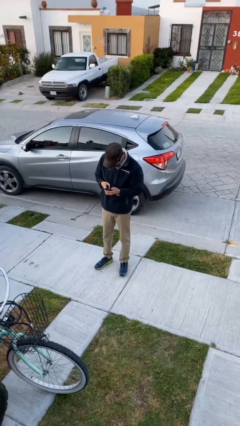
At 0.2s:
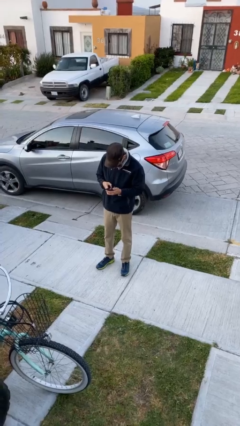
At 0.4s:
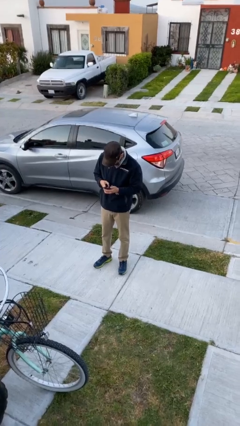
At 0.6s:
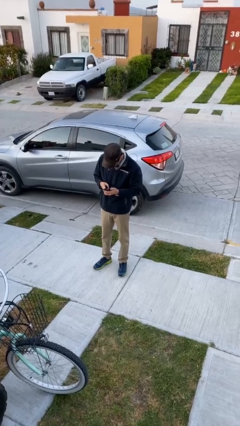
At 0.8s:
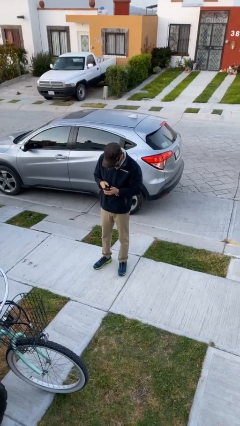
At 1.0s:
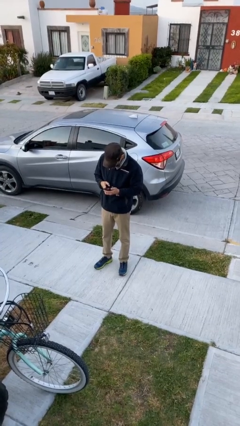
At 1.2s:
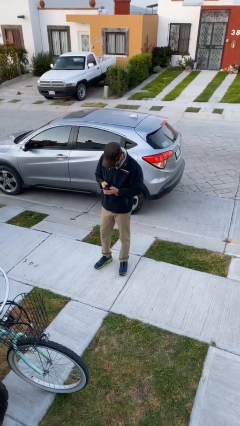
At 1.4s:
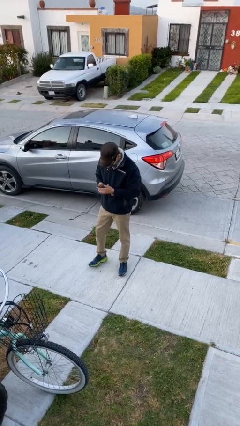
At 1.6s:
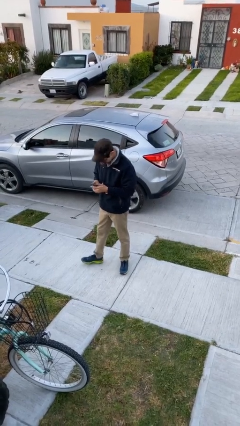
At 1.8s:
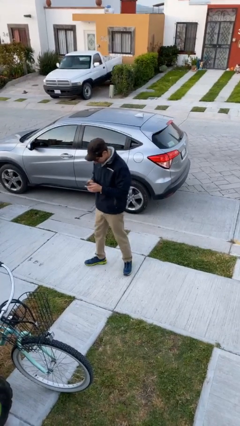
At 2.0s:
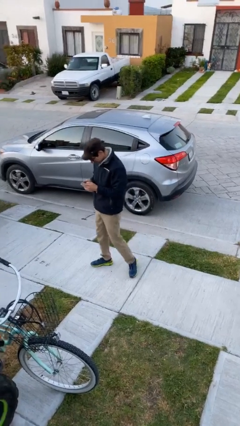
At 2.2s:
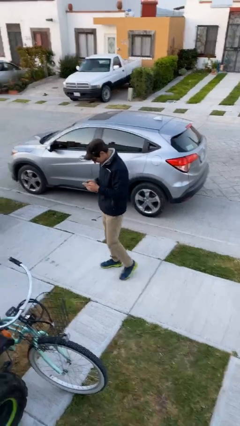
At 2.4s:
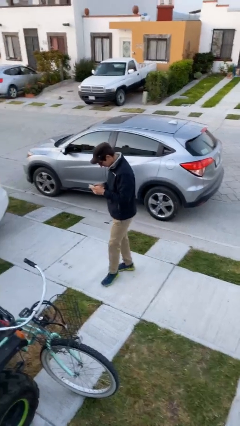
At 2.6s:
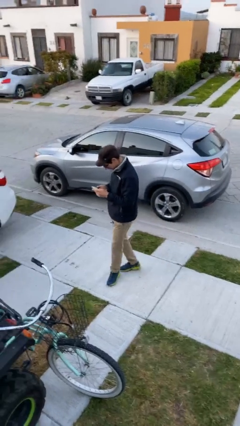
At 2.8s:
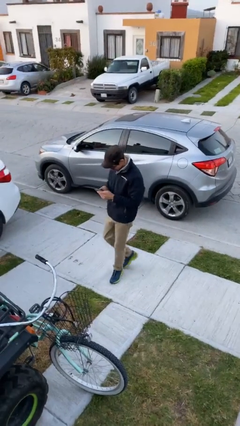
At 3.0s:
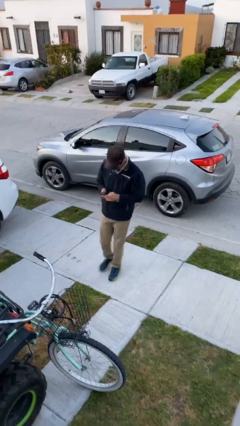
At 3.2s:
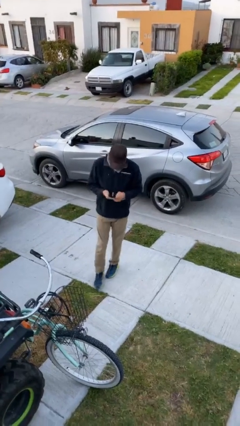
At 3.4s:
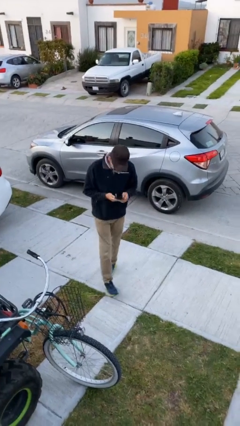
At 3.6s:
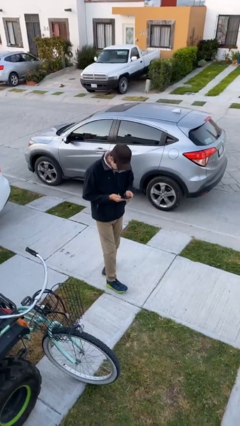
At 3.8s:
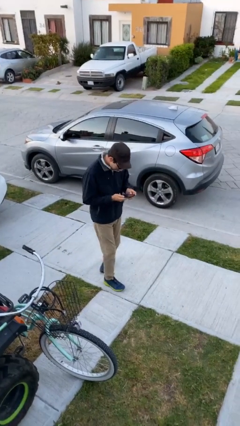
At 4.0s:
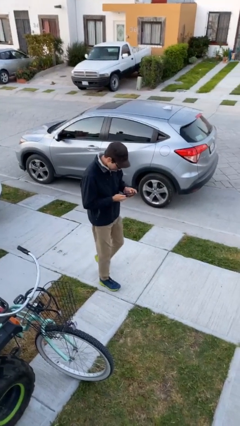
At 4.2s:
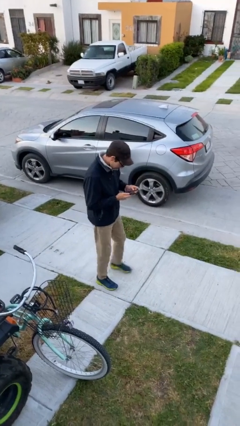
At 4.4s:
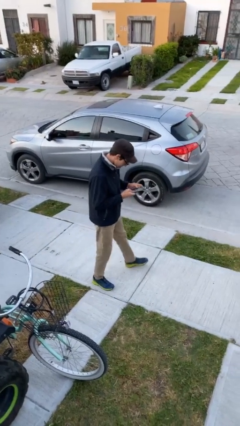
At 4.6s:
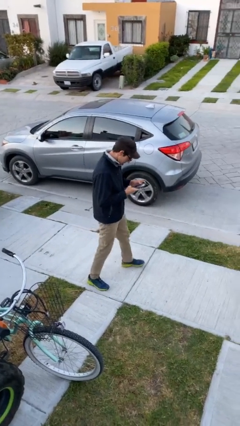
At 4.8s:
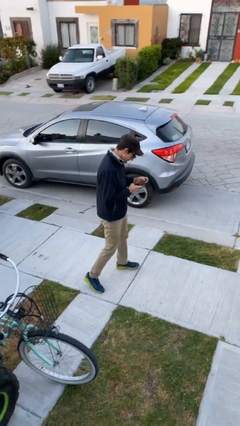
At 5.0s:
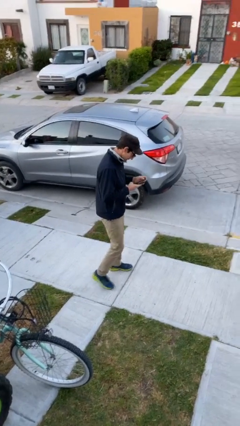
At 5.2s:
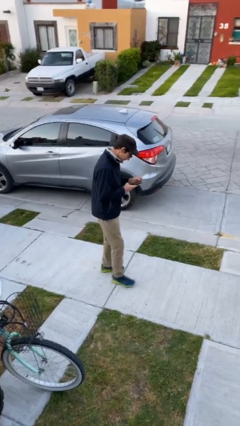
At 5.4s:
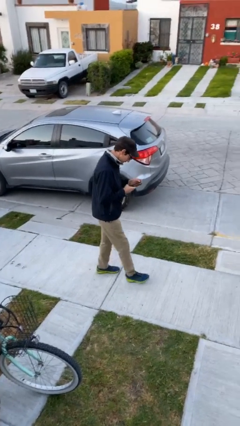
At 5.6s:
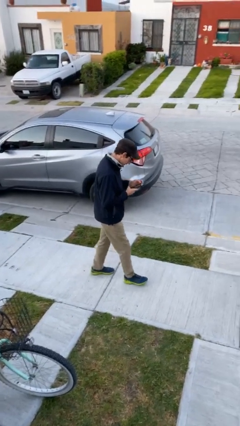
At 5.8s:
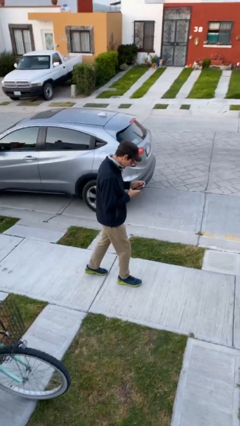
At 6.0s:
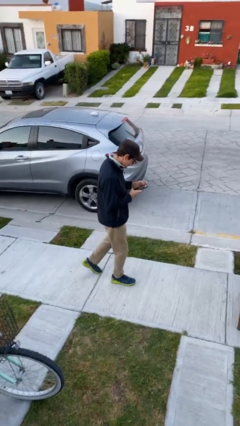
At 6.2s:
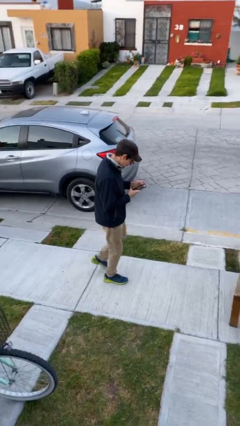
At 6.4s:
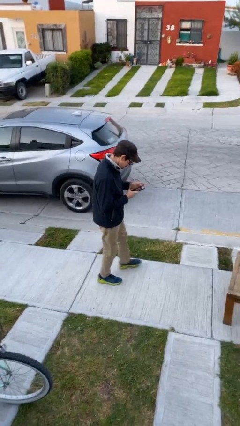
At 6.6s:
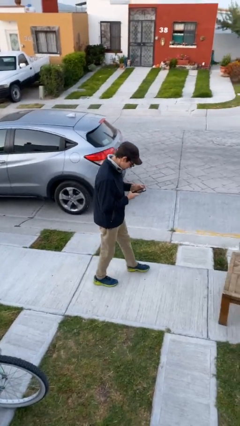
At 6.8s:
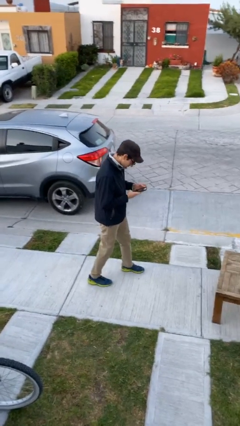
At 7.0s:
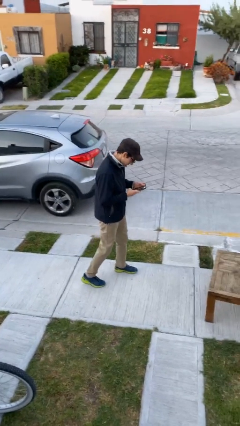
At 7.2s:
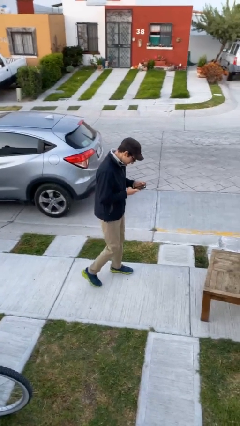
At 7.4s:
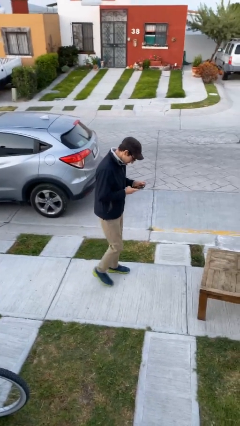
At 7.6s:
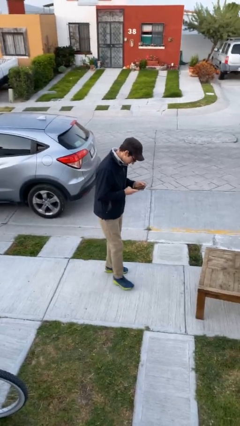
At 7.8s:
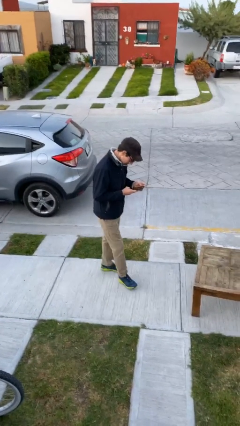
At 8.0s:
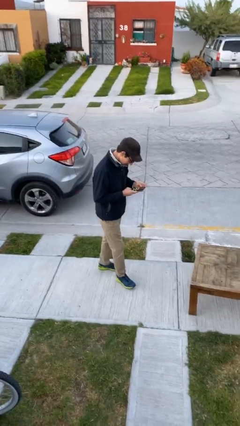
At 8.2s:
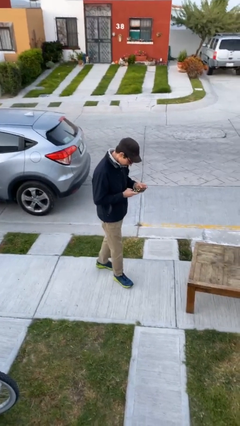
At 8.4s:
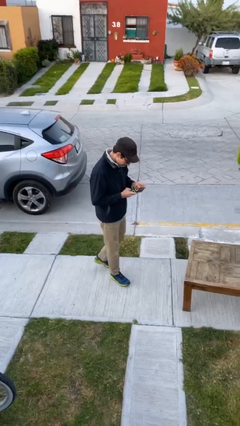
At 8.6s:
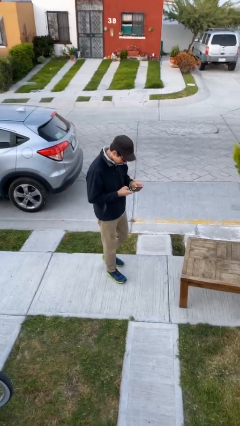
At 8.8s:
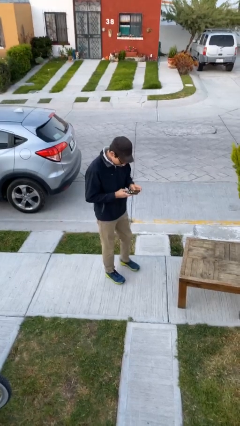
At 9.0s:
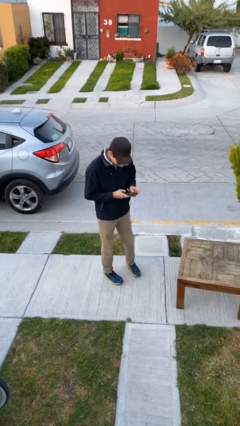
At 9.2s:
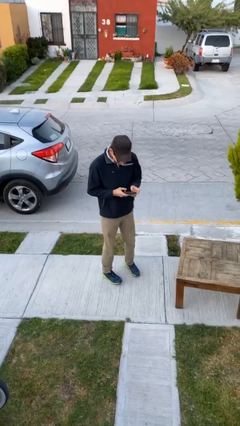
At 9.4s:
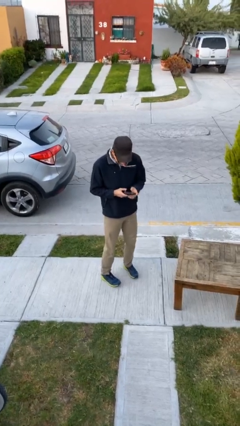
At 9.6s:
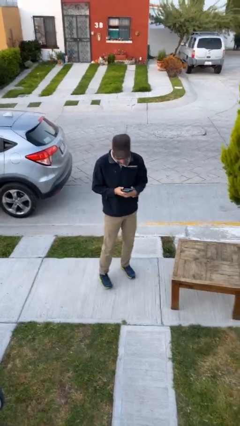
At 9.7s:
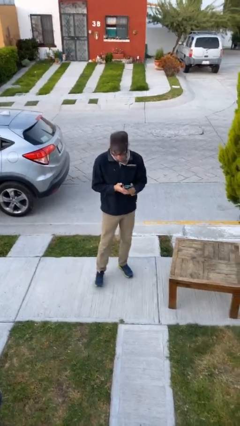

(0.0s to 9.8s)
person texts on phone

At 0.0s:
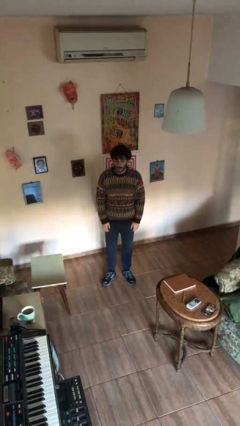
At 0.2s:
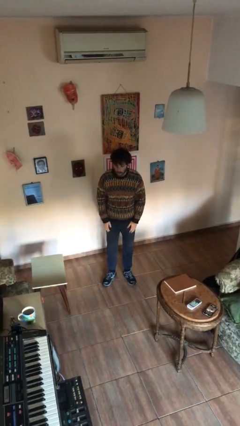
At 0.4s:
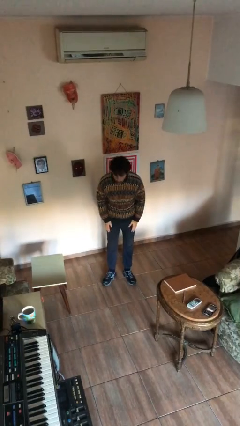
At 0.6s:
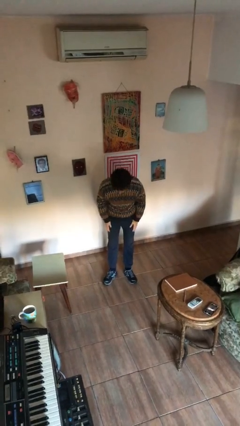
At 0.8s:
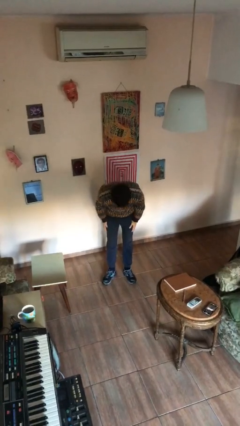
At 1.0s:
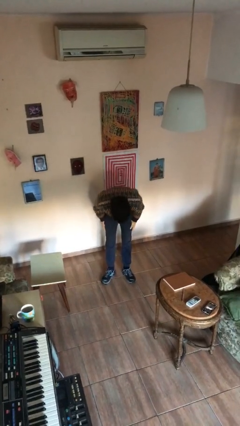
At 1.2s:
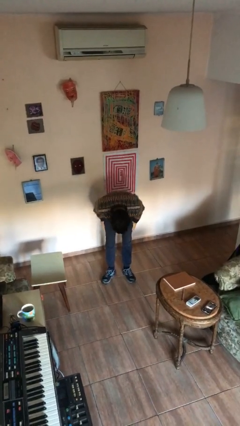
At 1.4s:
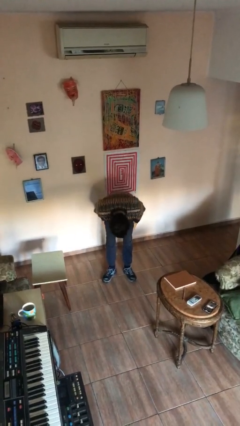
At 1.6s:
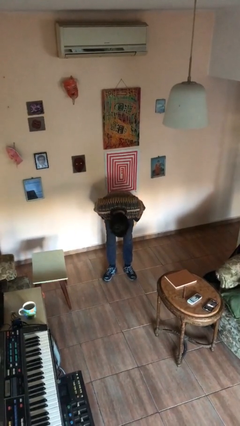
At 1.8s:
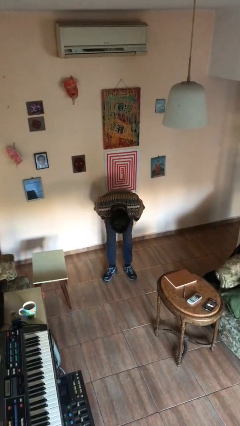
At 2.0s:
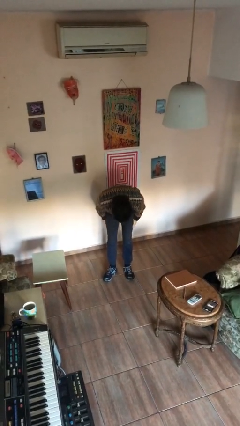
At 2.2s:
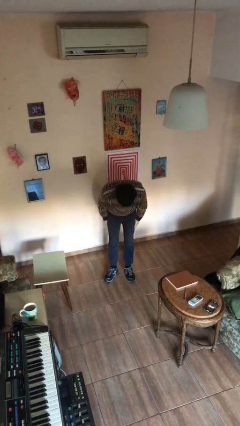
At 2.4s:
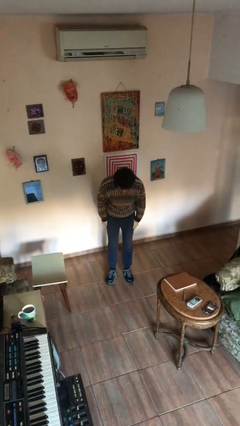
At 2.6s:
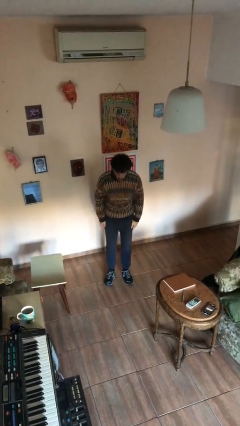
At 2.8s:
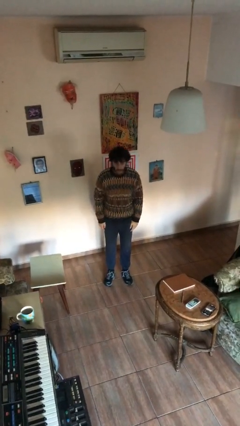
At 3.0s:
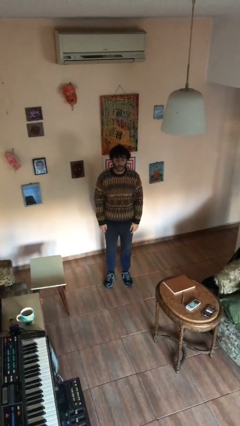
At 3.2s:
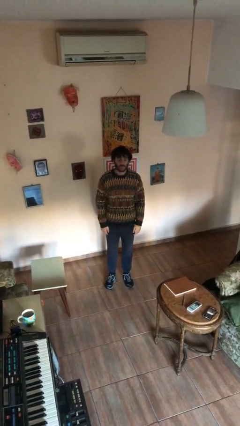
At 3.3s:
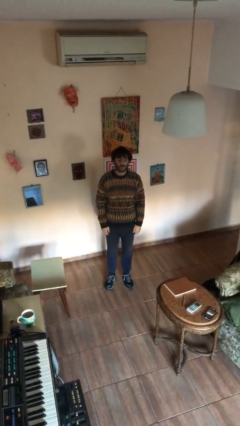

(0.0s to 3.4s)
person bows

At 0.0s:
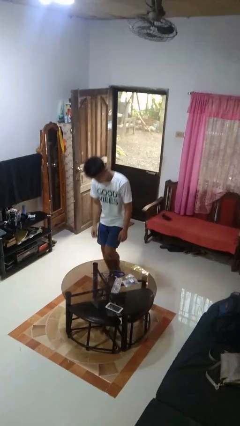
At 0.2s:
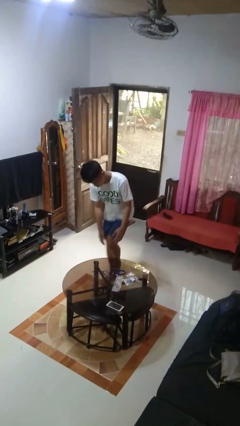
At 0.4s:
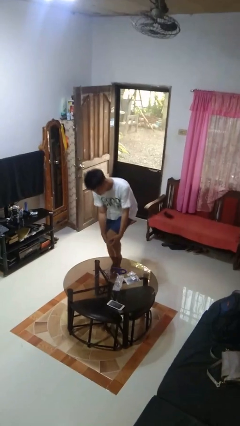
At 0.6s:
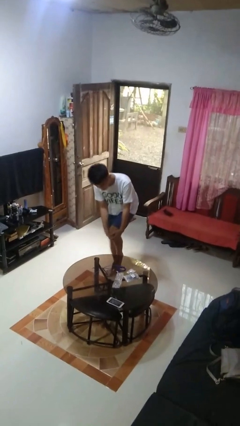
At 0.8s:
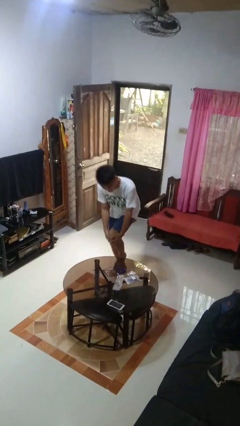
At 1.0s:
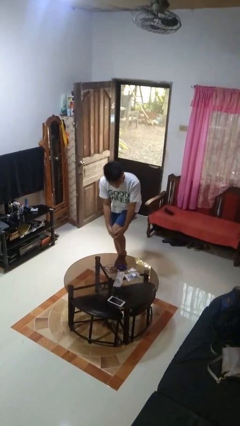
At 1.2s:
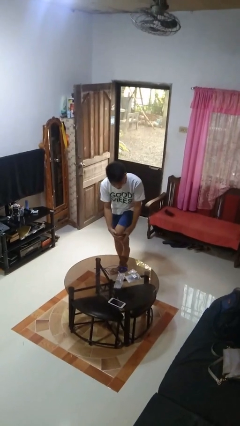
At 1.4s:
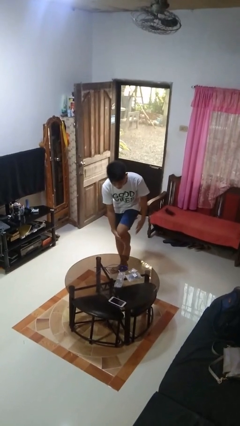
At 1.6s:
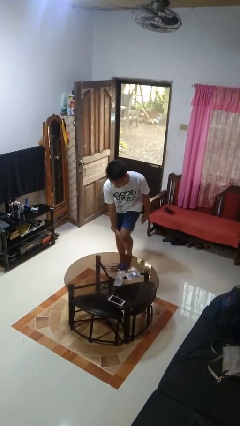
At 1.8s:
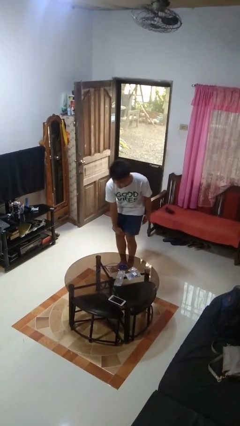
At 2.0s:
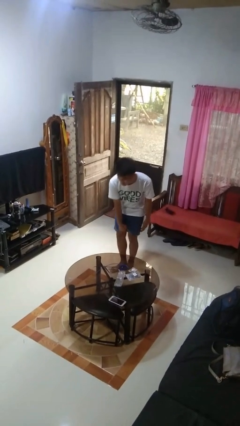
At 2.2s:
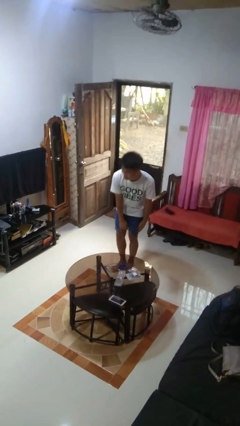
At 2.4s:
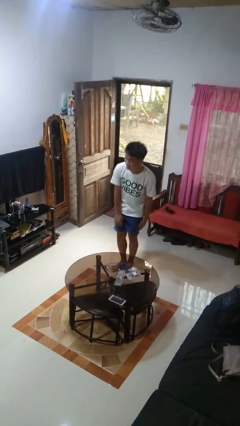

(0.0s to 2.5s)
person bumps into table

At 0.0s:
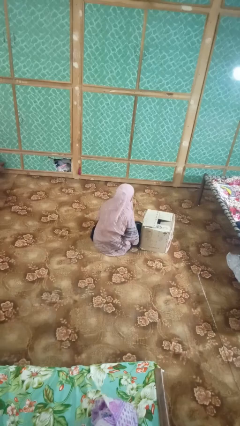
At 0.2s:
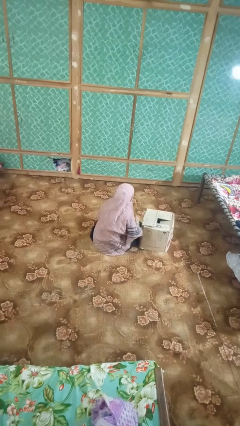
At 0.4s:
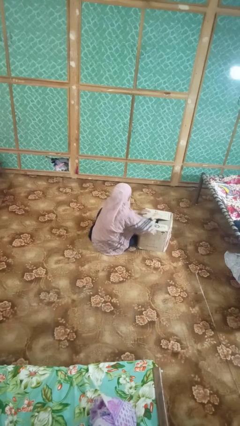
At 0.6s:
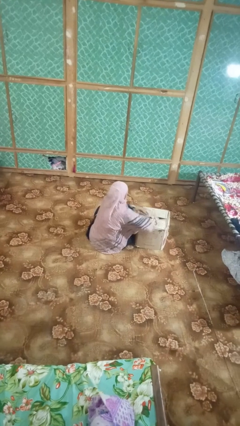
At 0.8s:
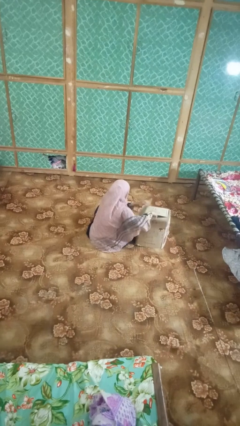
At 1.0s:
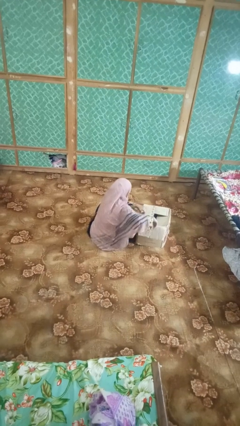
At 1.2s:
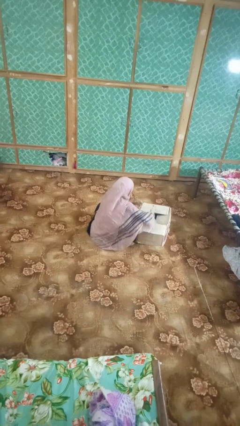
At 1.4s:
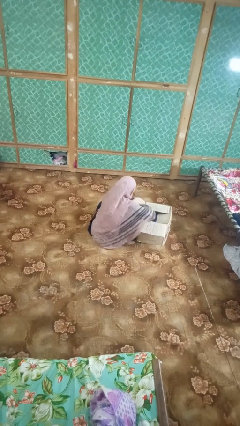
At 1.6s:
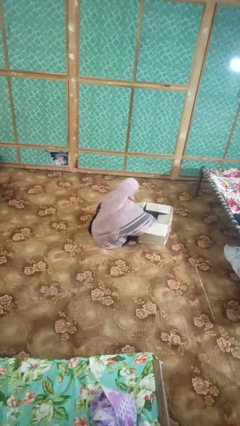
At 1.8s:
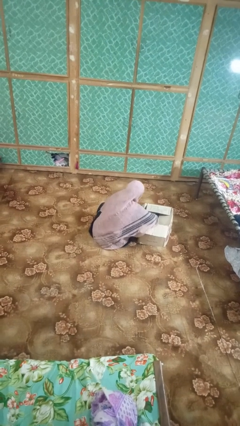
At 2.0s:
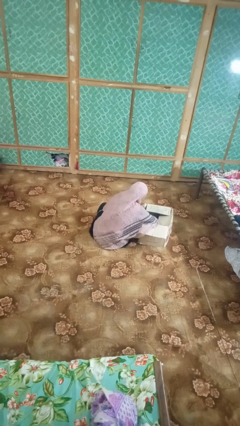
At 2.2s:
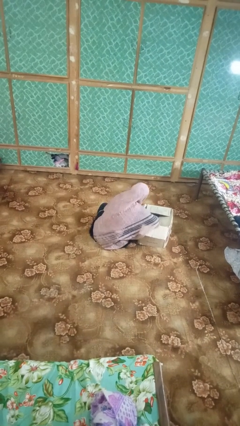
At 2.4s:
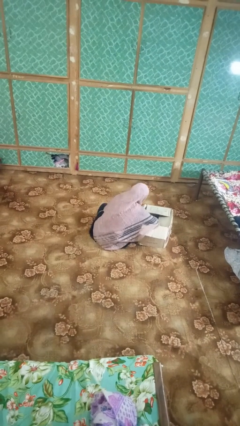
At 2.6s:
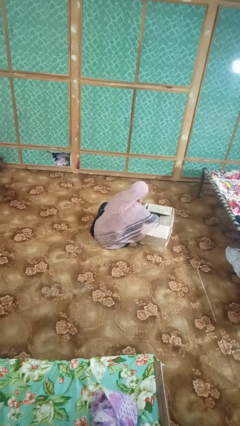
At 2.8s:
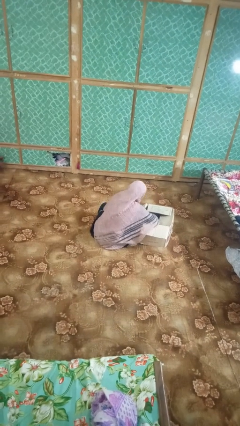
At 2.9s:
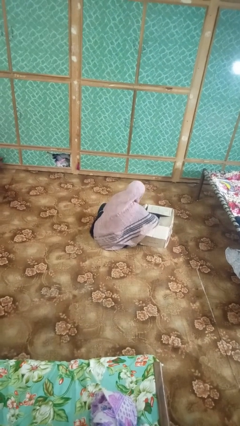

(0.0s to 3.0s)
person searches in box
